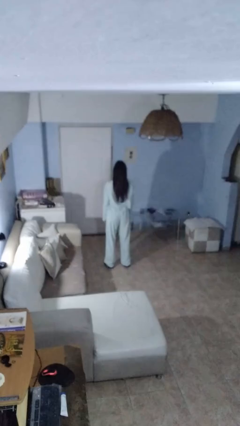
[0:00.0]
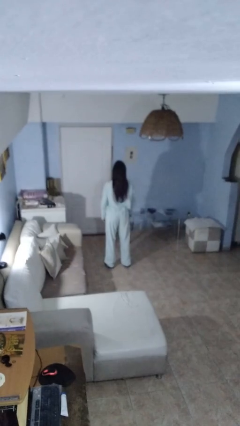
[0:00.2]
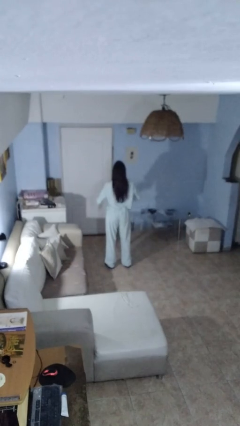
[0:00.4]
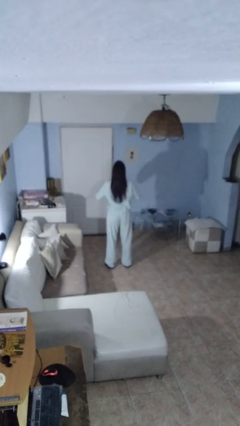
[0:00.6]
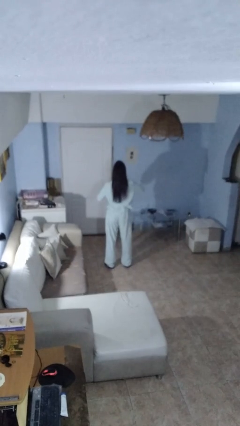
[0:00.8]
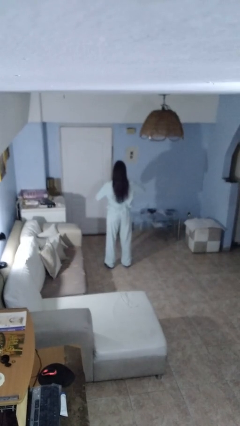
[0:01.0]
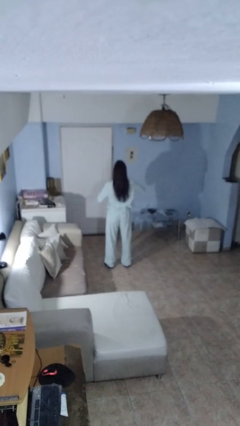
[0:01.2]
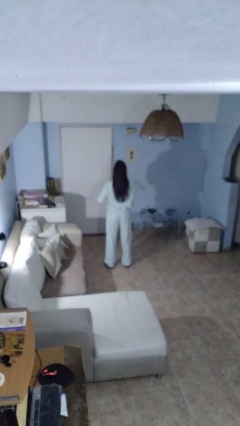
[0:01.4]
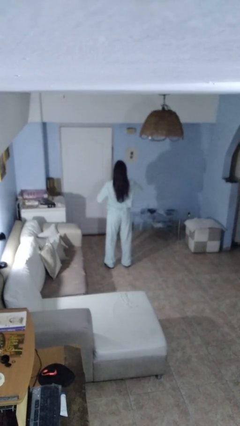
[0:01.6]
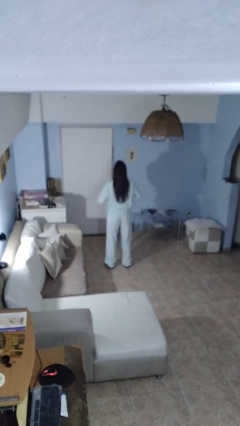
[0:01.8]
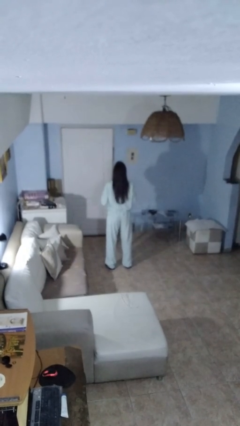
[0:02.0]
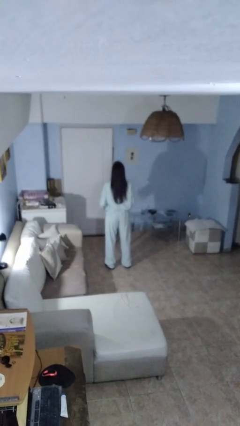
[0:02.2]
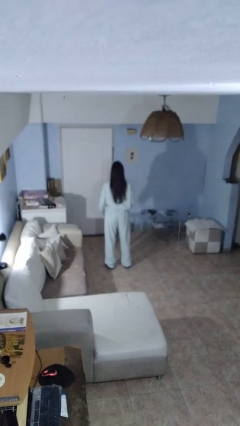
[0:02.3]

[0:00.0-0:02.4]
person drums on chest

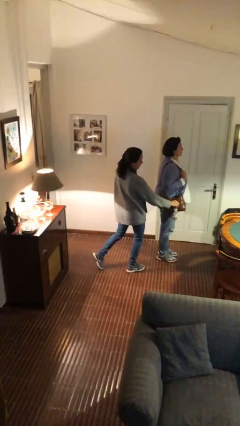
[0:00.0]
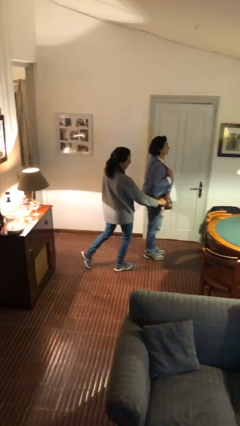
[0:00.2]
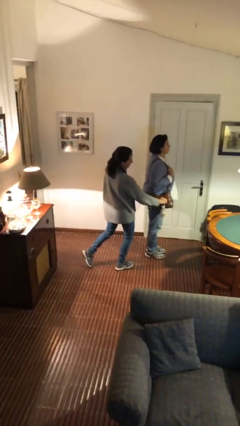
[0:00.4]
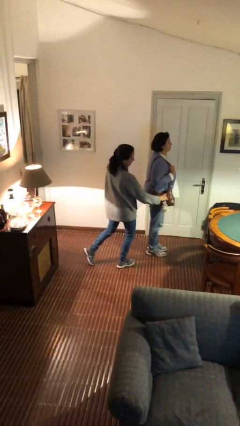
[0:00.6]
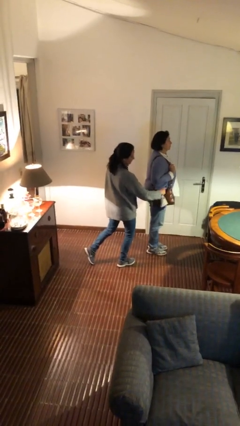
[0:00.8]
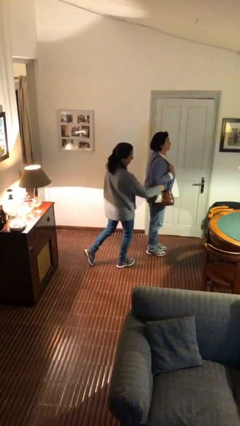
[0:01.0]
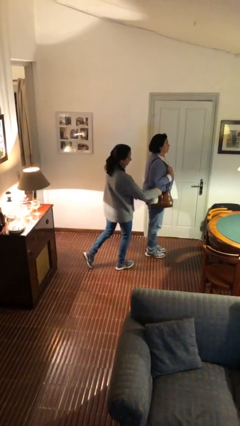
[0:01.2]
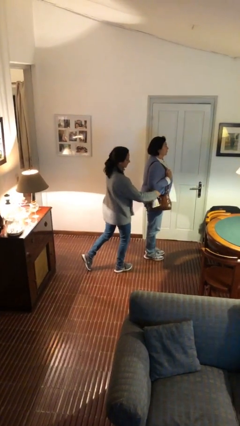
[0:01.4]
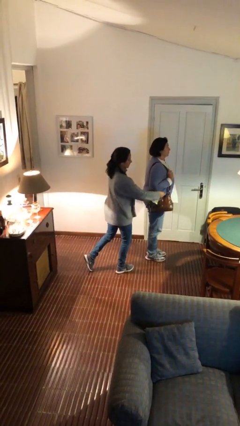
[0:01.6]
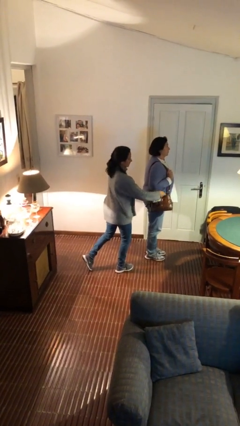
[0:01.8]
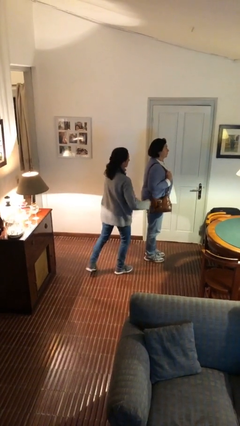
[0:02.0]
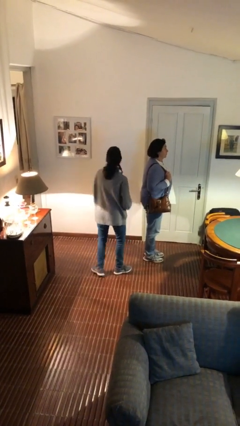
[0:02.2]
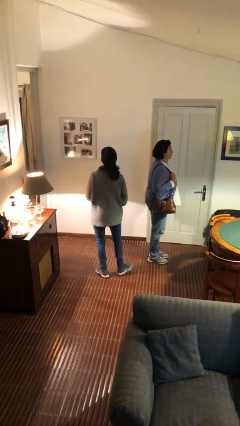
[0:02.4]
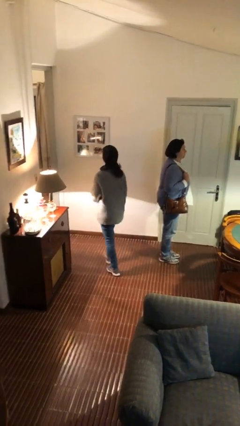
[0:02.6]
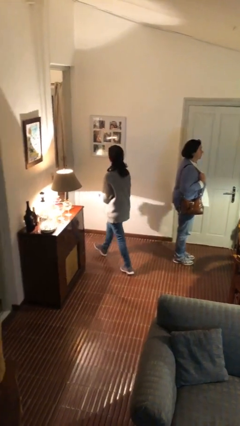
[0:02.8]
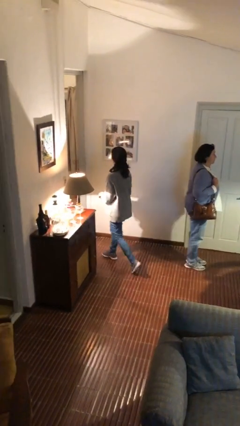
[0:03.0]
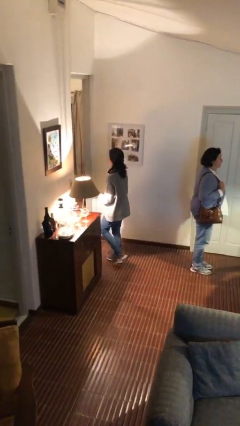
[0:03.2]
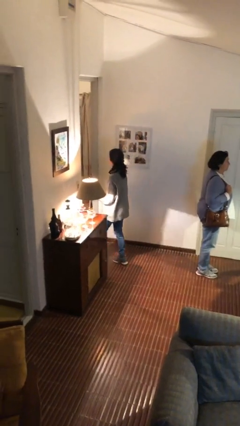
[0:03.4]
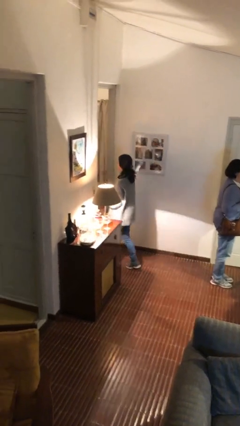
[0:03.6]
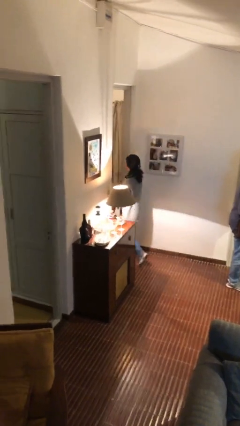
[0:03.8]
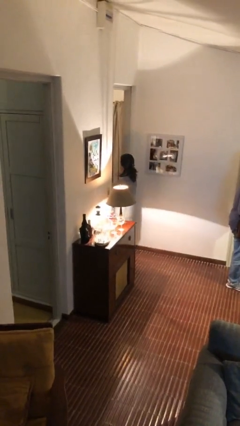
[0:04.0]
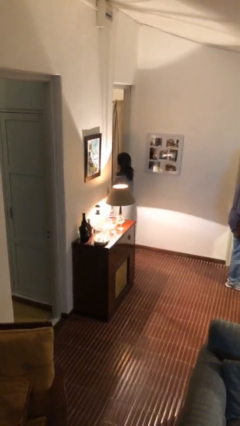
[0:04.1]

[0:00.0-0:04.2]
person steals object from person

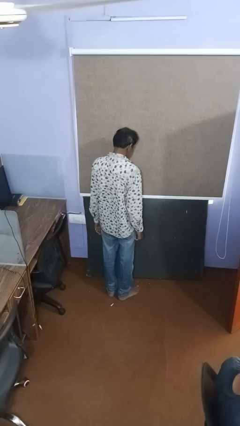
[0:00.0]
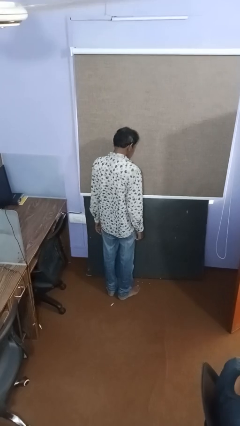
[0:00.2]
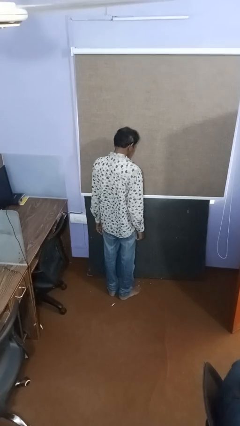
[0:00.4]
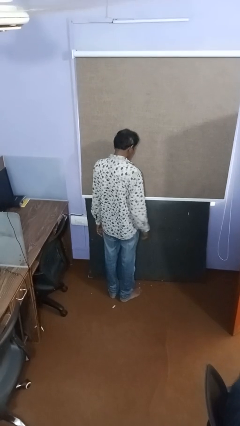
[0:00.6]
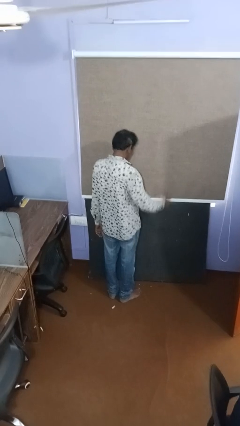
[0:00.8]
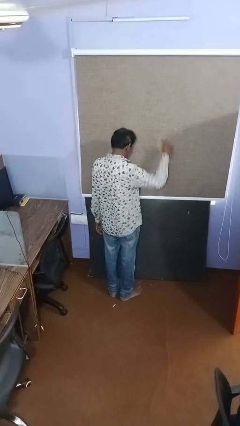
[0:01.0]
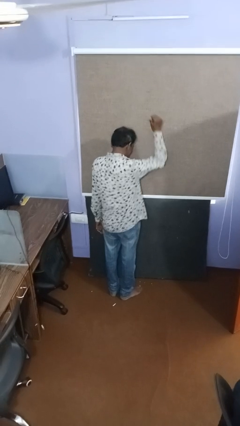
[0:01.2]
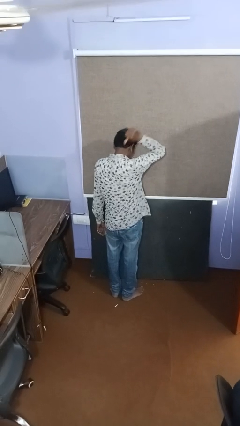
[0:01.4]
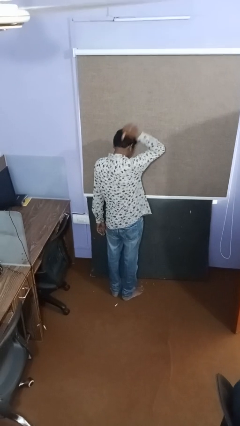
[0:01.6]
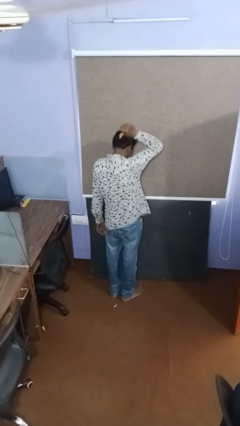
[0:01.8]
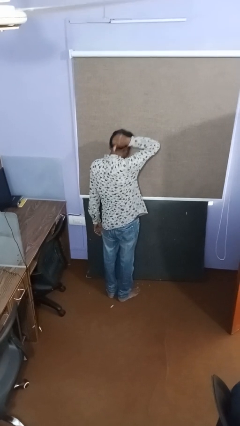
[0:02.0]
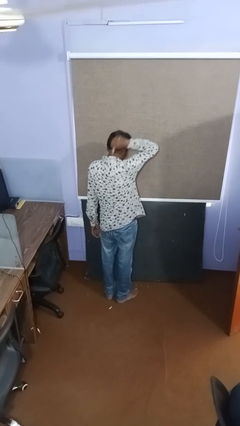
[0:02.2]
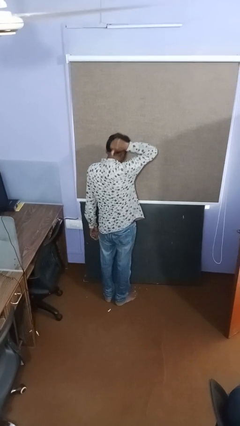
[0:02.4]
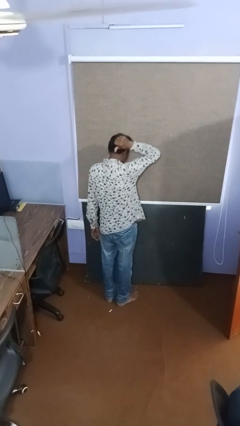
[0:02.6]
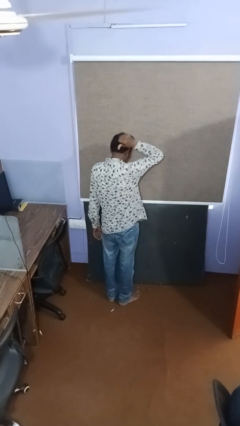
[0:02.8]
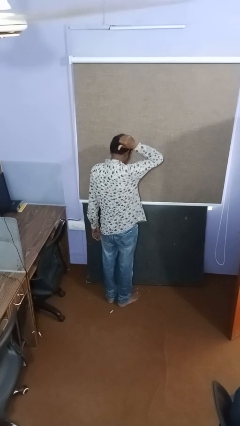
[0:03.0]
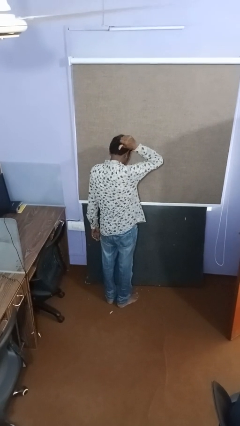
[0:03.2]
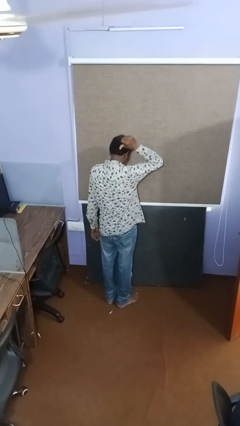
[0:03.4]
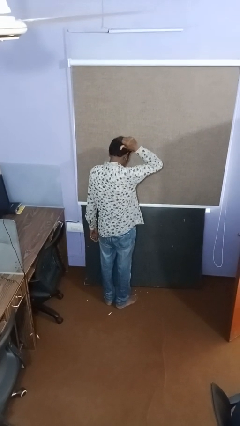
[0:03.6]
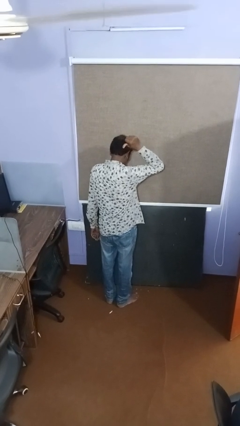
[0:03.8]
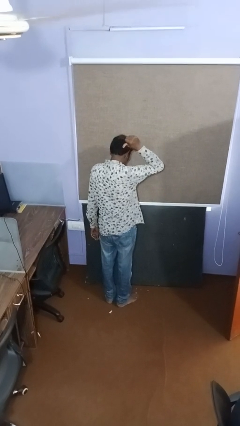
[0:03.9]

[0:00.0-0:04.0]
person gestures thumbs up

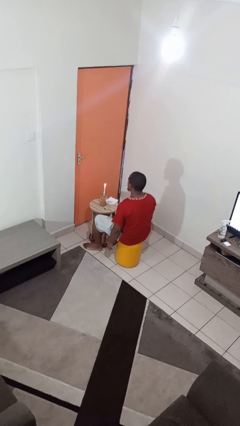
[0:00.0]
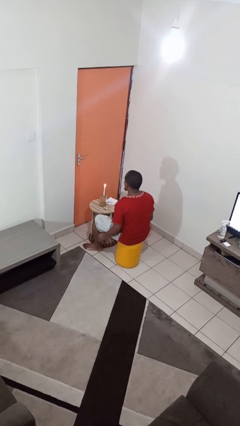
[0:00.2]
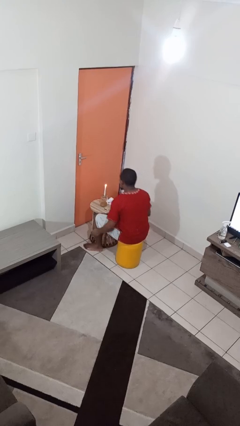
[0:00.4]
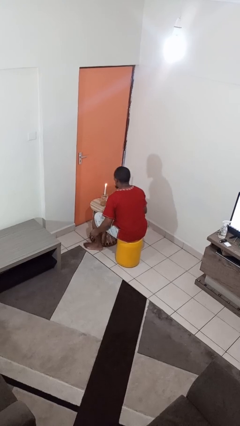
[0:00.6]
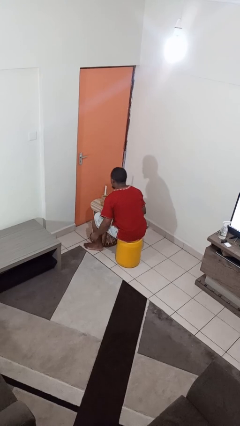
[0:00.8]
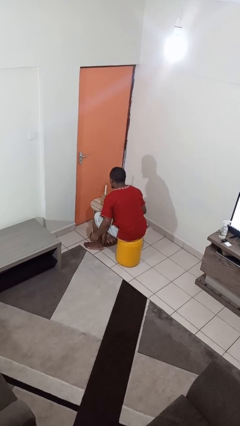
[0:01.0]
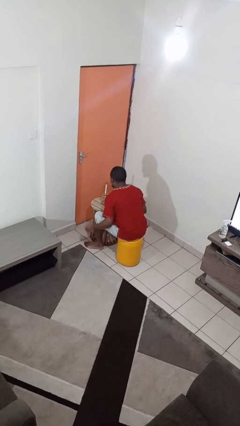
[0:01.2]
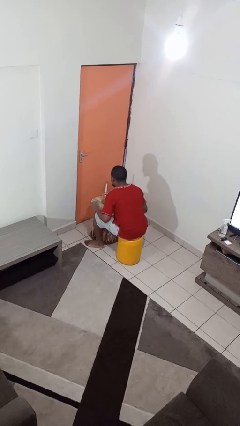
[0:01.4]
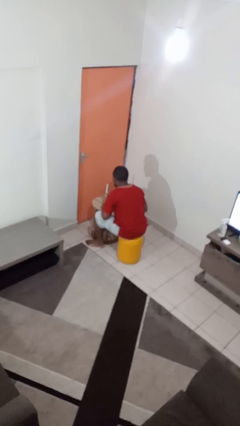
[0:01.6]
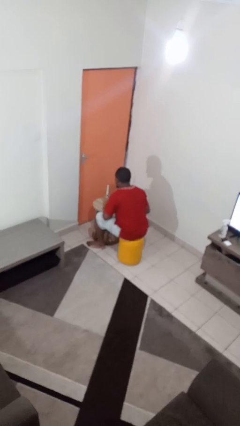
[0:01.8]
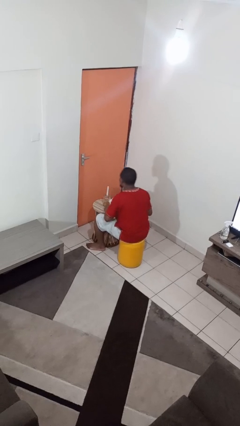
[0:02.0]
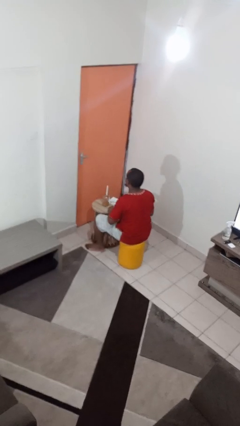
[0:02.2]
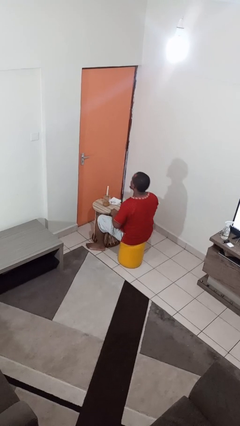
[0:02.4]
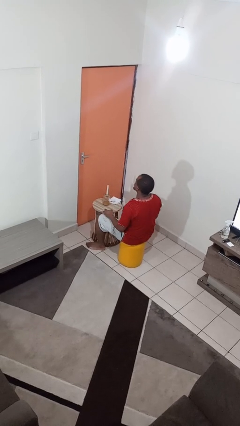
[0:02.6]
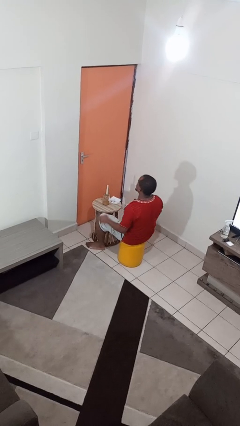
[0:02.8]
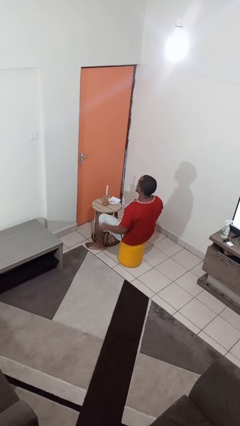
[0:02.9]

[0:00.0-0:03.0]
person extinguishes candle

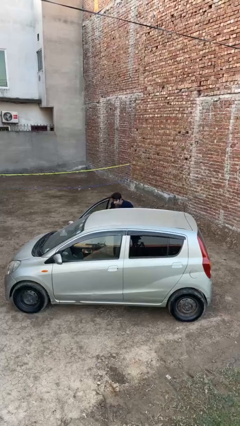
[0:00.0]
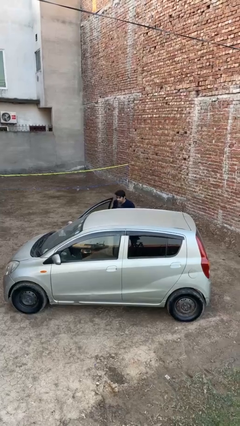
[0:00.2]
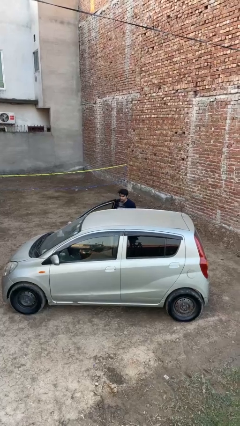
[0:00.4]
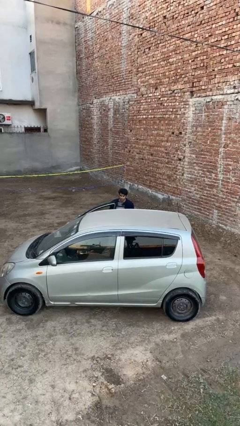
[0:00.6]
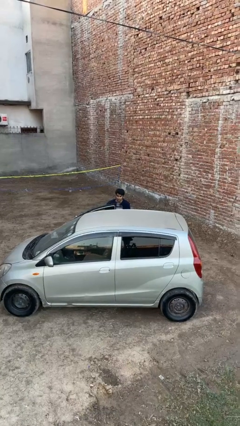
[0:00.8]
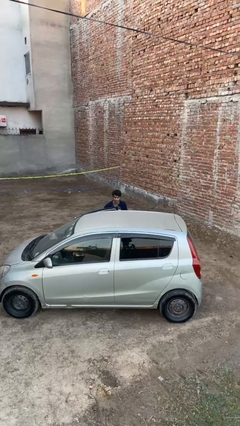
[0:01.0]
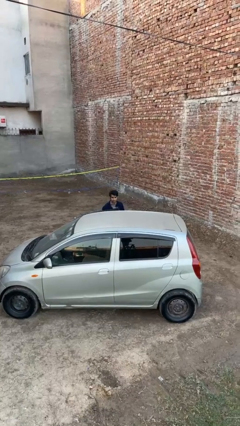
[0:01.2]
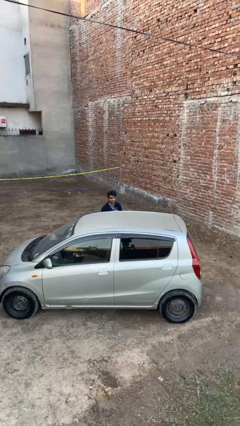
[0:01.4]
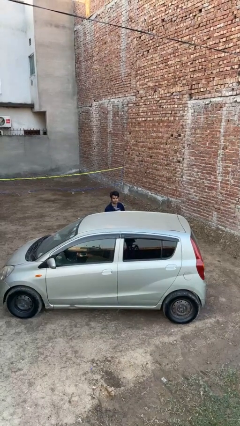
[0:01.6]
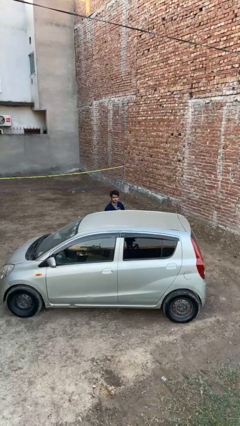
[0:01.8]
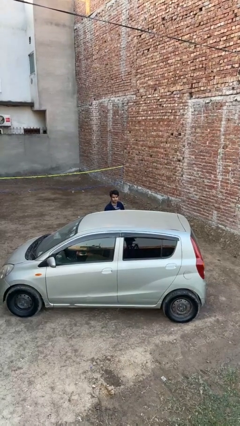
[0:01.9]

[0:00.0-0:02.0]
person closes car door

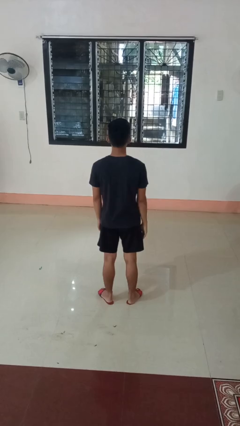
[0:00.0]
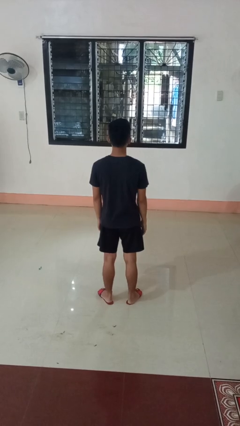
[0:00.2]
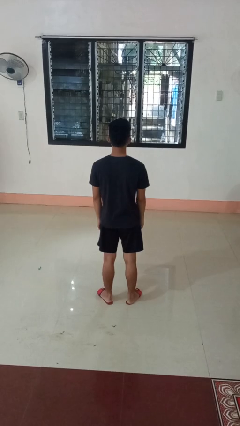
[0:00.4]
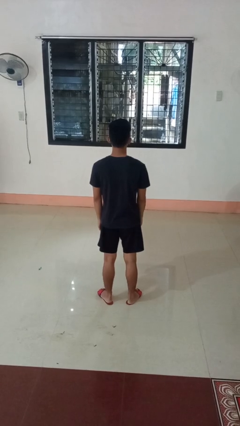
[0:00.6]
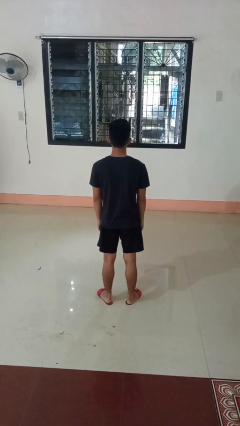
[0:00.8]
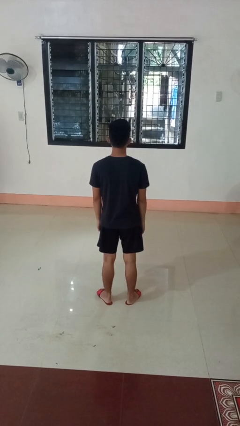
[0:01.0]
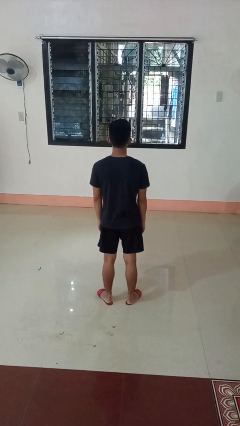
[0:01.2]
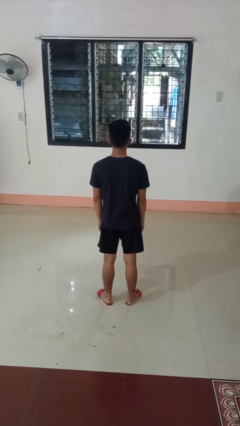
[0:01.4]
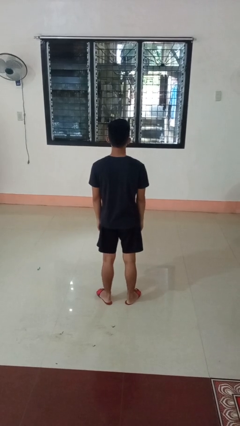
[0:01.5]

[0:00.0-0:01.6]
person gestures lower hand

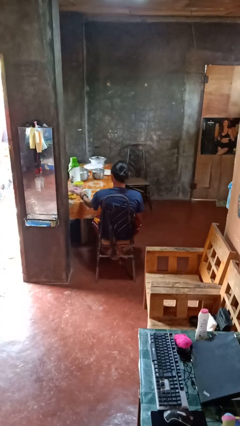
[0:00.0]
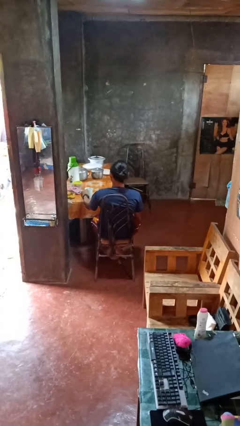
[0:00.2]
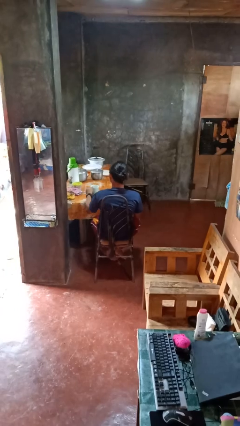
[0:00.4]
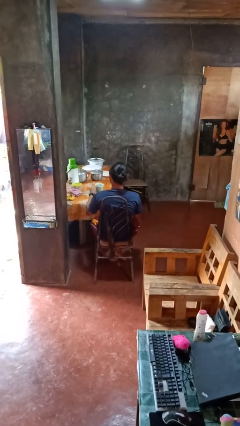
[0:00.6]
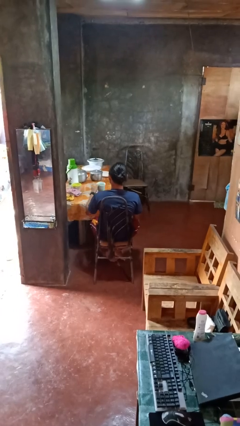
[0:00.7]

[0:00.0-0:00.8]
person picks up object from table
